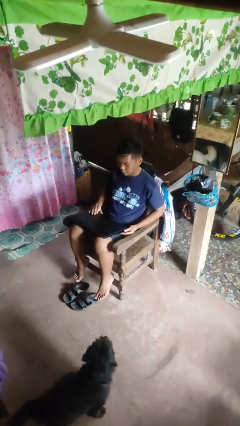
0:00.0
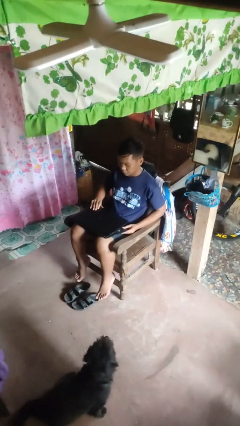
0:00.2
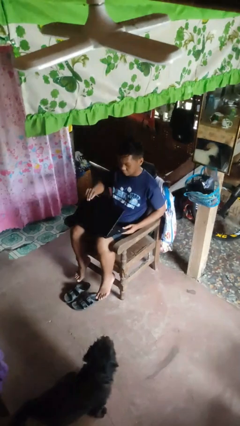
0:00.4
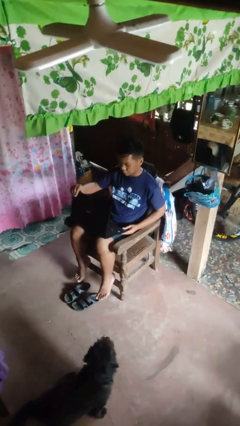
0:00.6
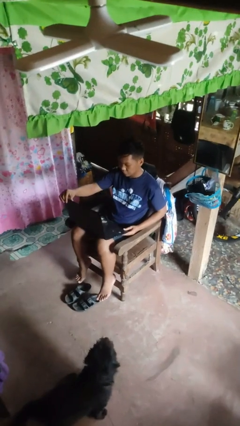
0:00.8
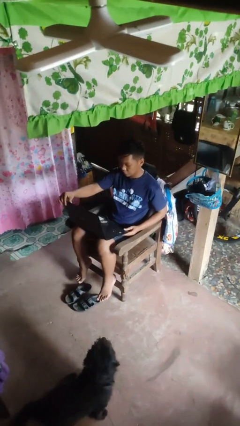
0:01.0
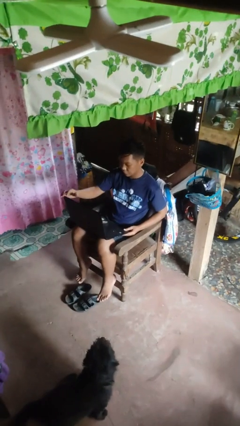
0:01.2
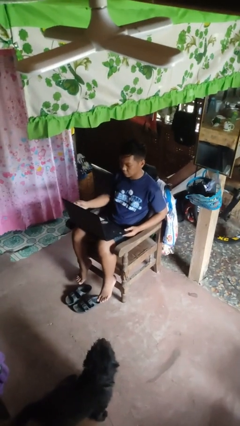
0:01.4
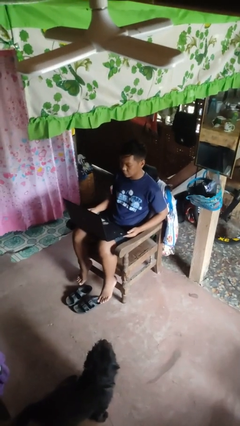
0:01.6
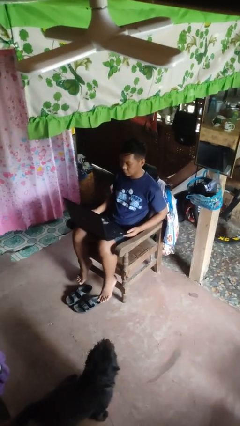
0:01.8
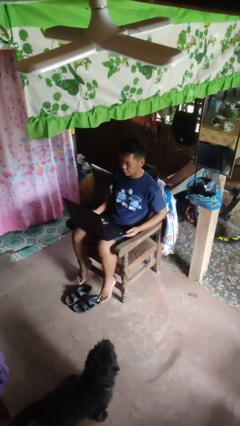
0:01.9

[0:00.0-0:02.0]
person opens laptop

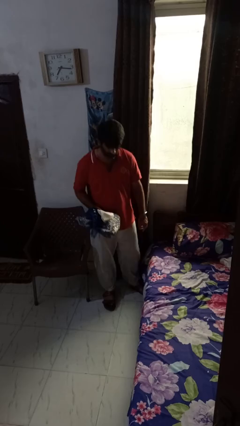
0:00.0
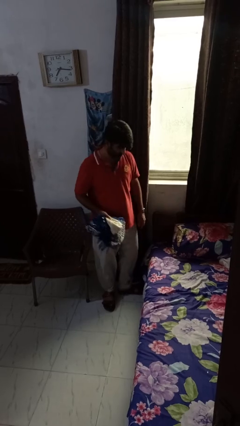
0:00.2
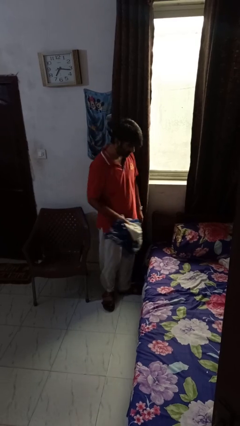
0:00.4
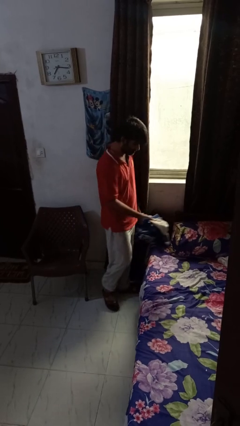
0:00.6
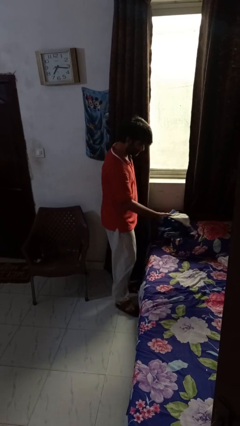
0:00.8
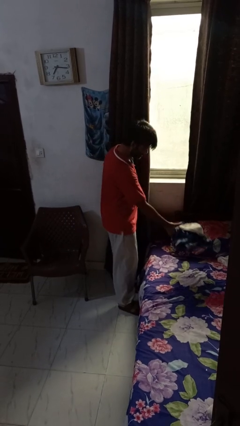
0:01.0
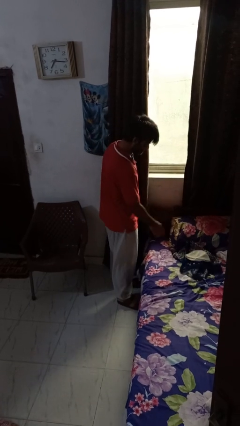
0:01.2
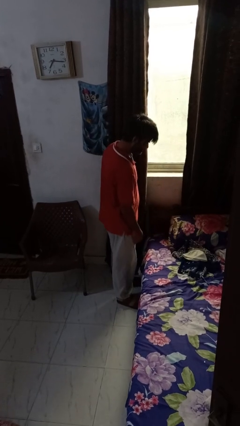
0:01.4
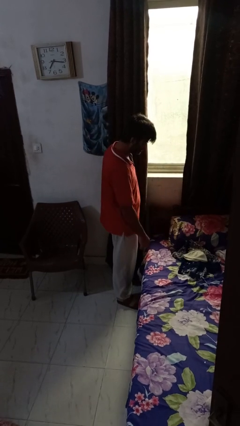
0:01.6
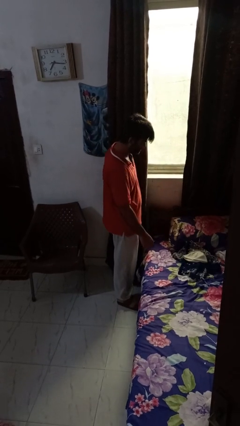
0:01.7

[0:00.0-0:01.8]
person puts down object on bed

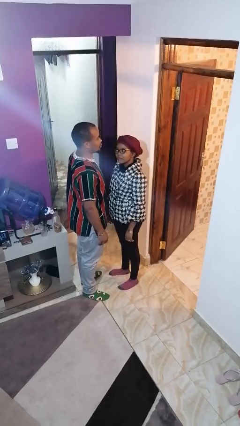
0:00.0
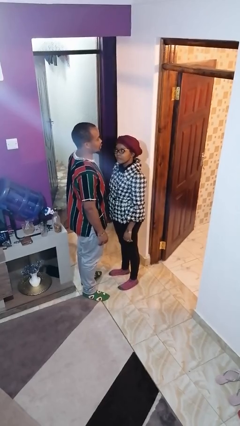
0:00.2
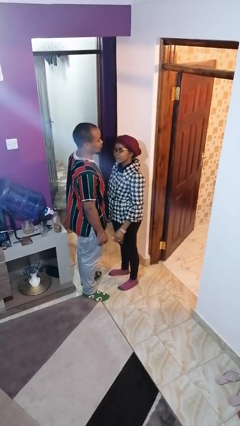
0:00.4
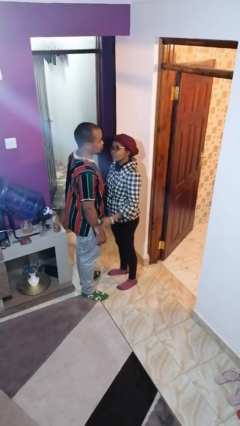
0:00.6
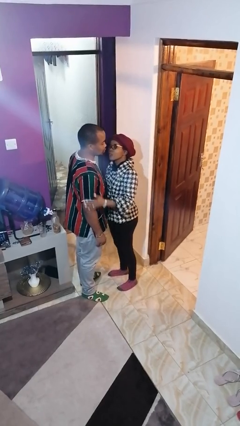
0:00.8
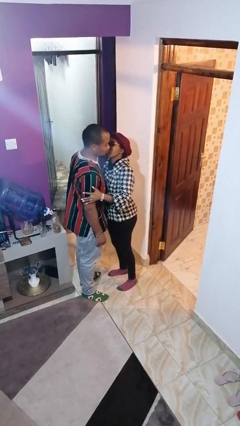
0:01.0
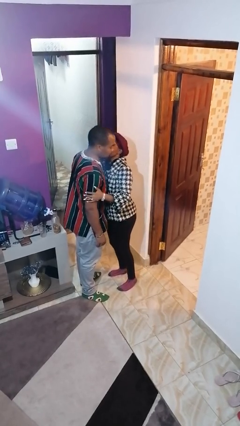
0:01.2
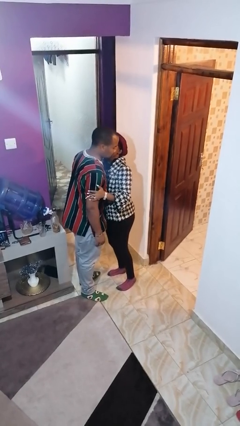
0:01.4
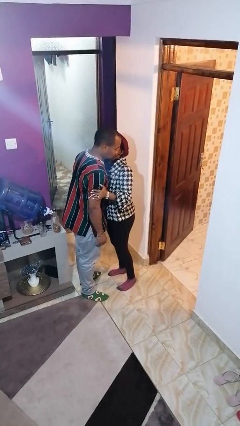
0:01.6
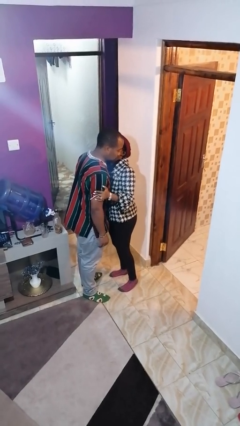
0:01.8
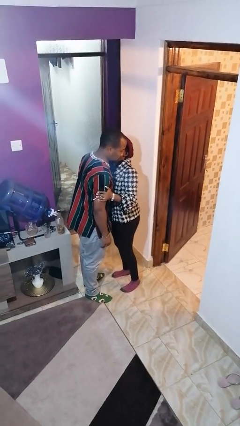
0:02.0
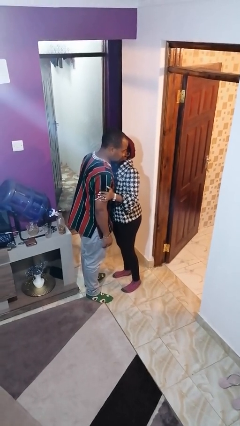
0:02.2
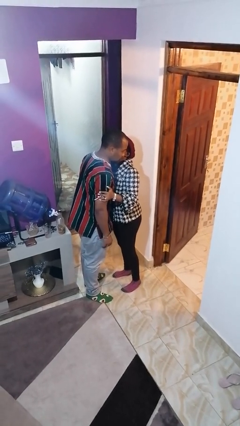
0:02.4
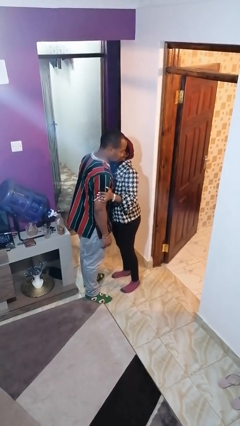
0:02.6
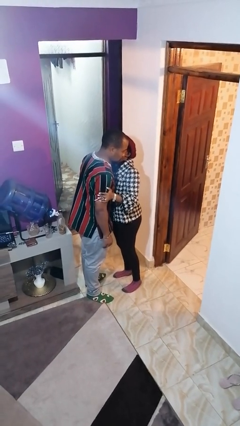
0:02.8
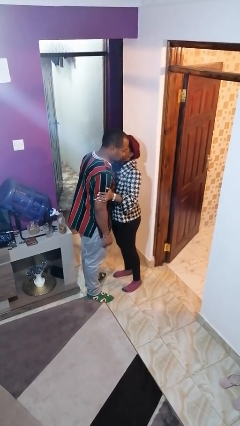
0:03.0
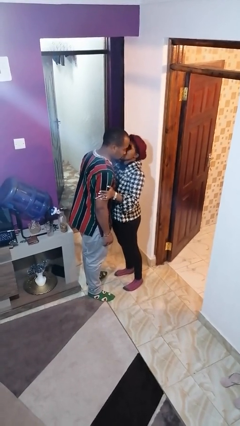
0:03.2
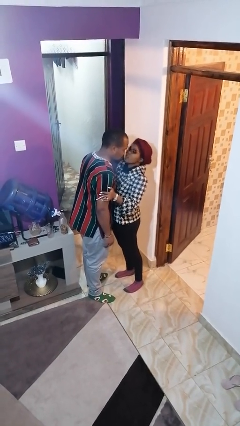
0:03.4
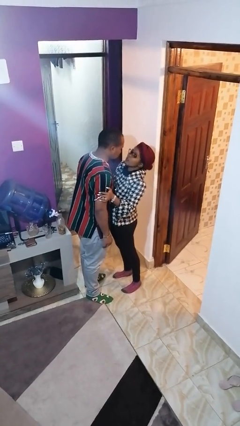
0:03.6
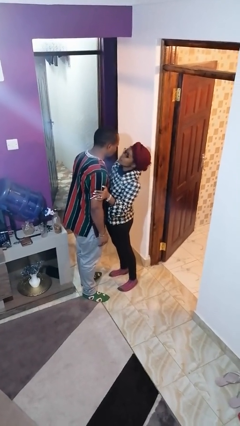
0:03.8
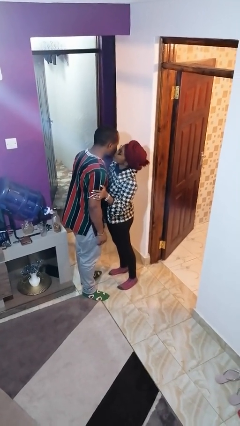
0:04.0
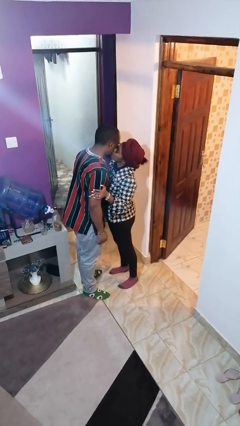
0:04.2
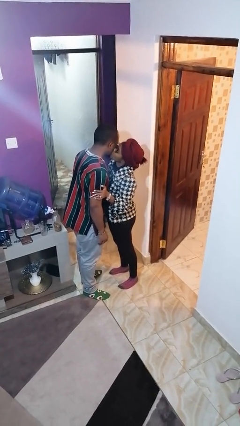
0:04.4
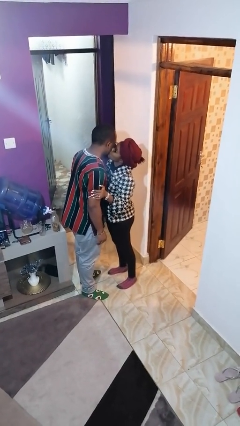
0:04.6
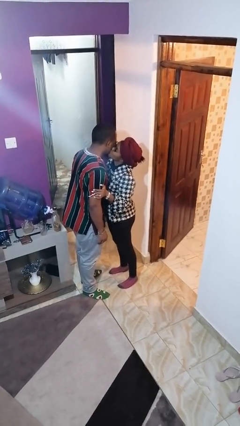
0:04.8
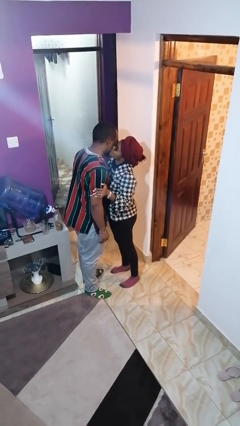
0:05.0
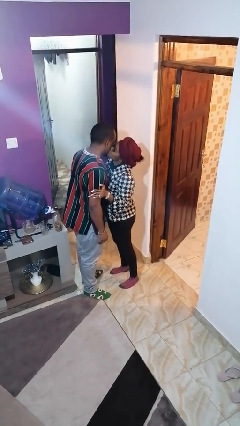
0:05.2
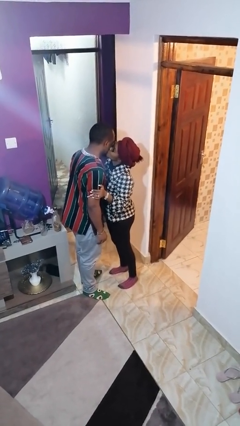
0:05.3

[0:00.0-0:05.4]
person kisses cheek of person

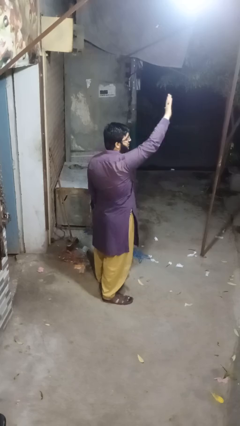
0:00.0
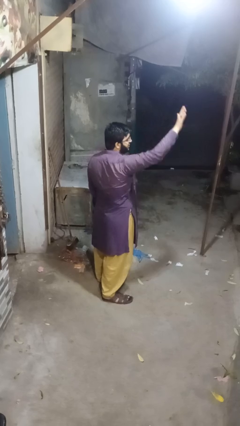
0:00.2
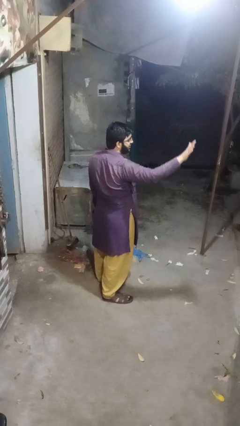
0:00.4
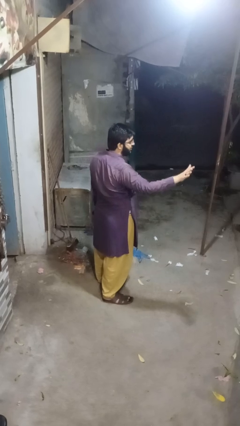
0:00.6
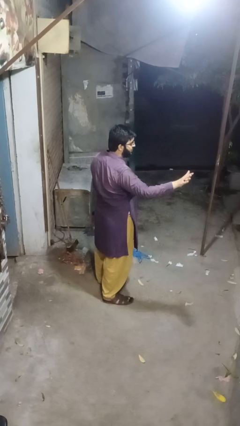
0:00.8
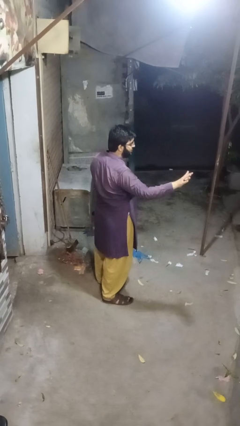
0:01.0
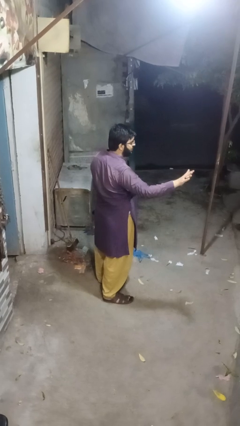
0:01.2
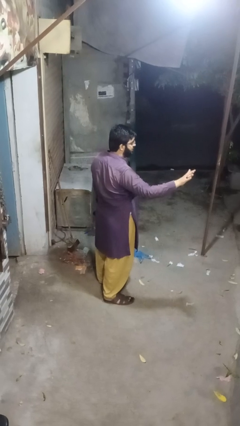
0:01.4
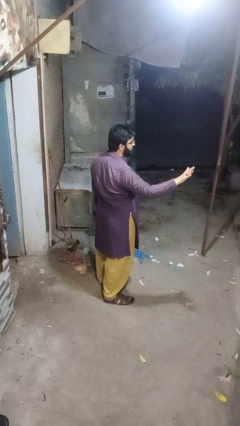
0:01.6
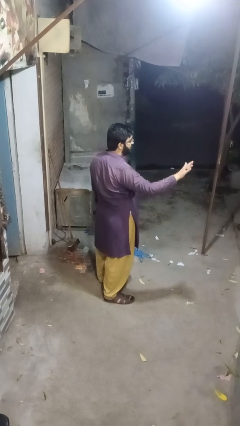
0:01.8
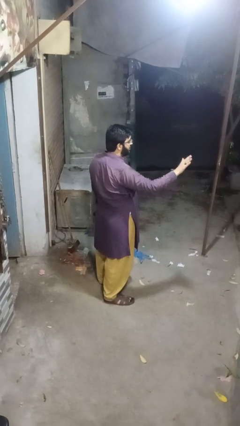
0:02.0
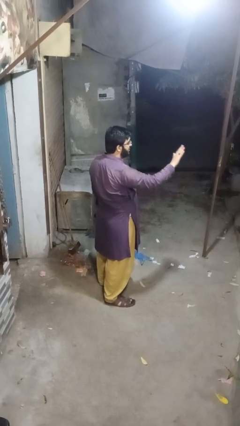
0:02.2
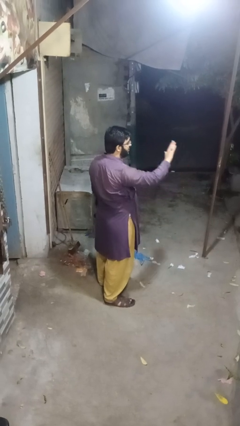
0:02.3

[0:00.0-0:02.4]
person gestures swipe right

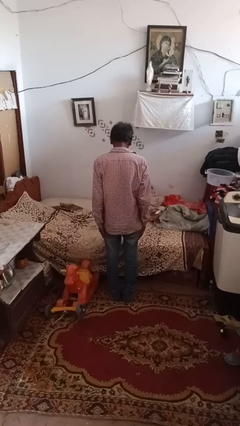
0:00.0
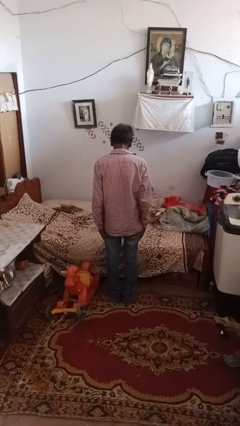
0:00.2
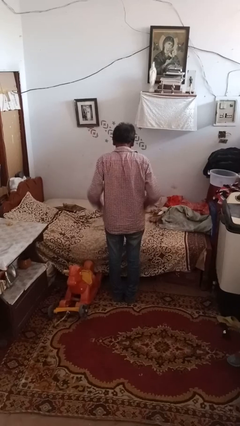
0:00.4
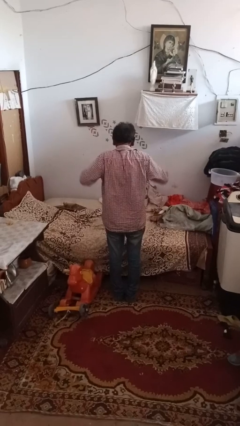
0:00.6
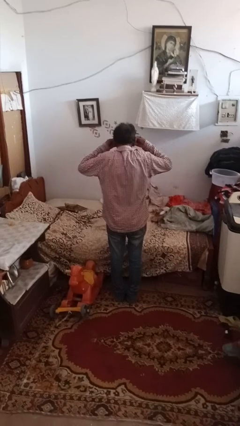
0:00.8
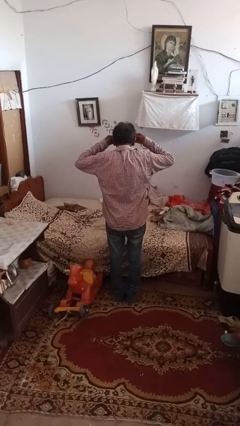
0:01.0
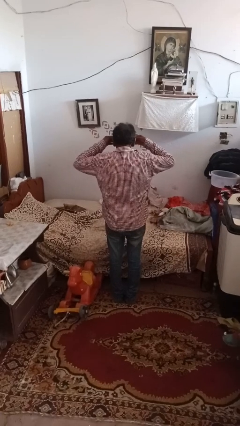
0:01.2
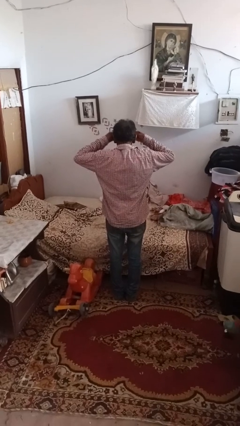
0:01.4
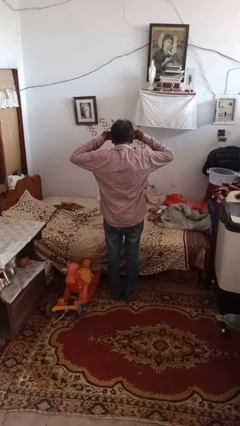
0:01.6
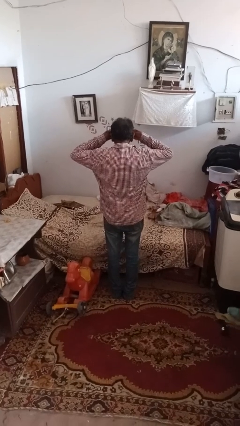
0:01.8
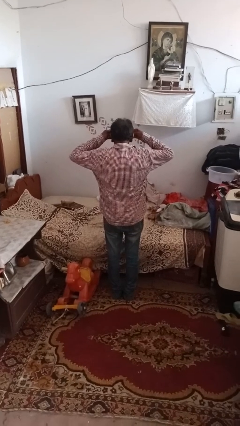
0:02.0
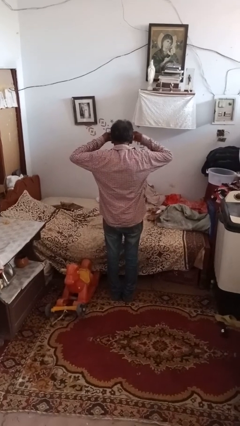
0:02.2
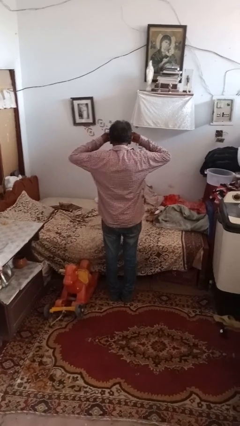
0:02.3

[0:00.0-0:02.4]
person rubs eyes

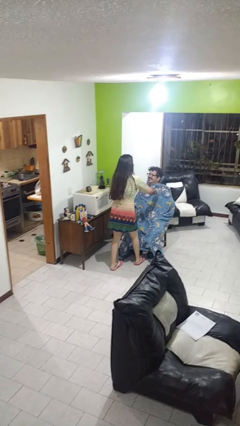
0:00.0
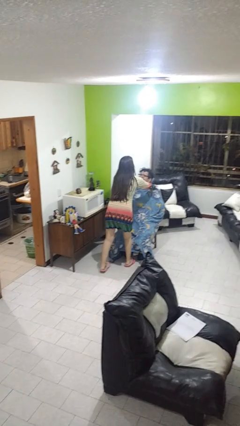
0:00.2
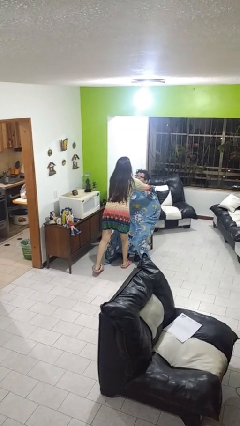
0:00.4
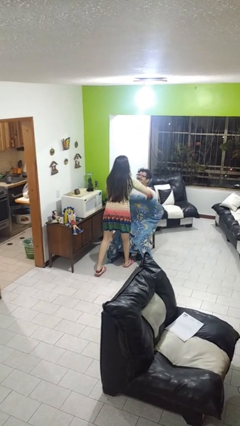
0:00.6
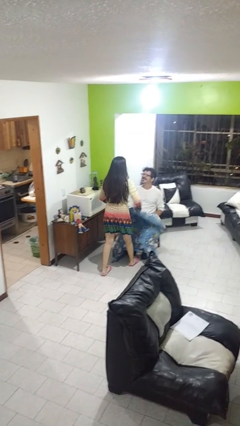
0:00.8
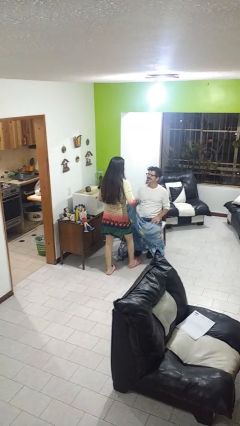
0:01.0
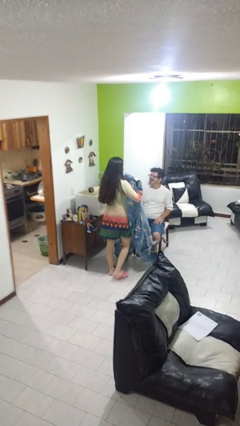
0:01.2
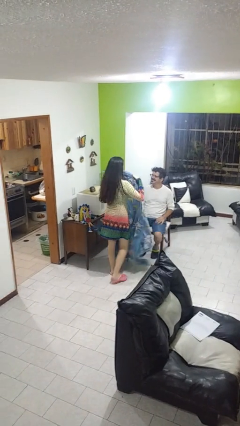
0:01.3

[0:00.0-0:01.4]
person uncovers friend with blanket

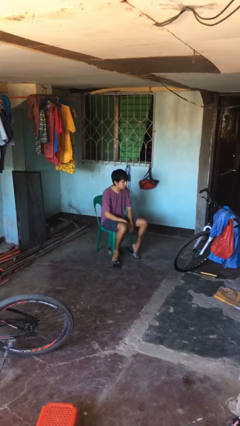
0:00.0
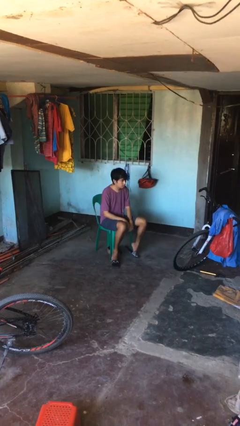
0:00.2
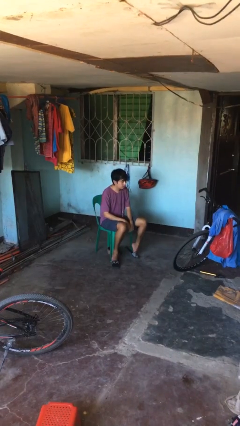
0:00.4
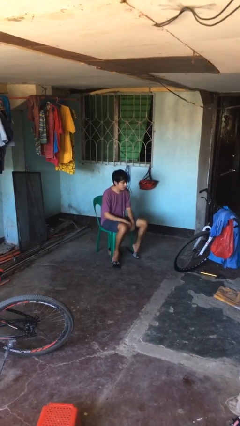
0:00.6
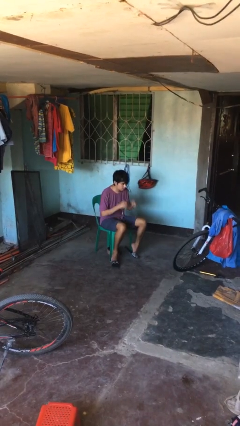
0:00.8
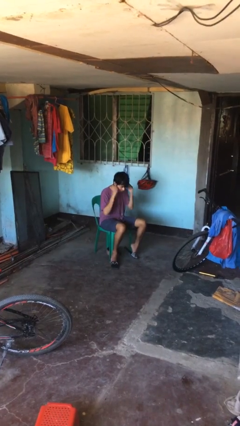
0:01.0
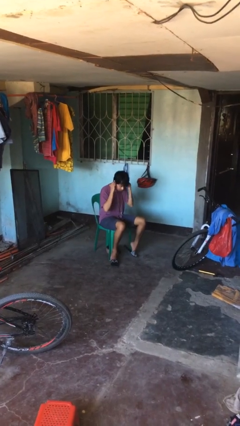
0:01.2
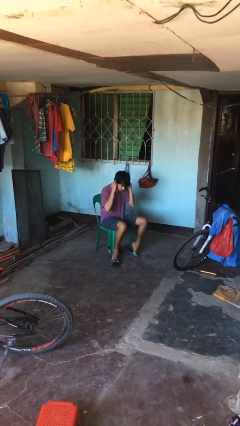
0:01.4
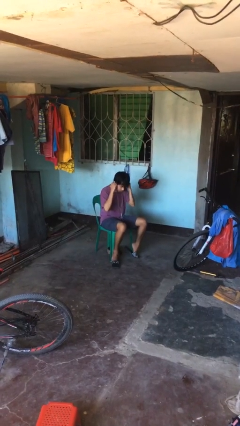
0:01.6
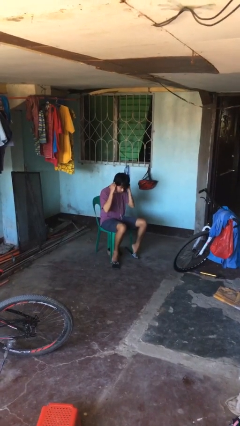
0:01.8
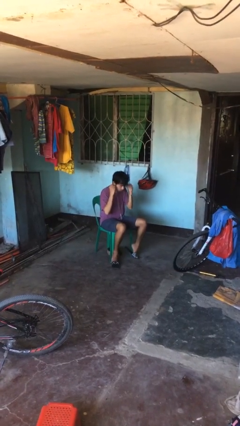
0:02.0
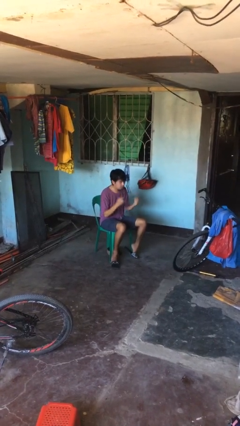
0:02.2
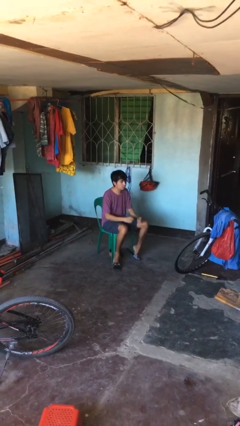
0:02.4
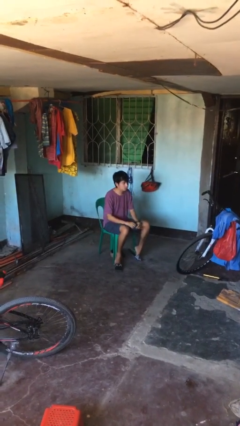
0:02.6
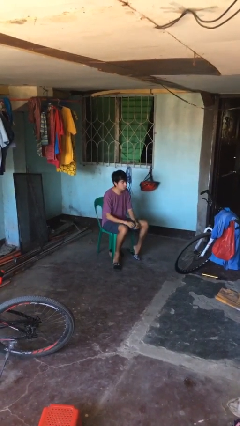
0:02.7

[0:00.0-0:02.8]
person takes off headphones
